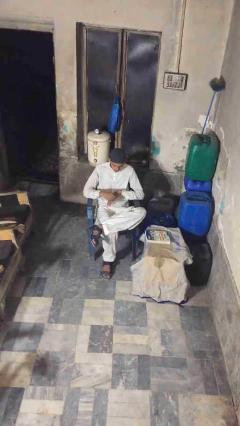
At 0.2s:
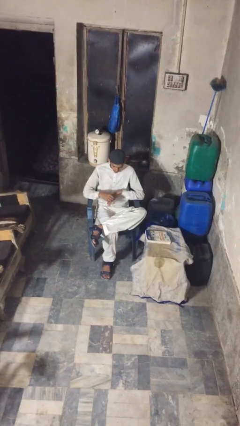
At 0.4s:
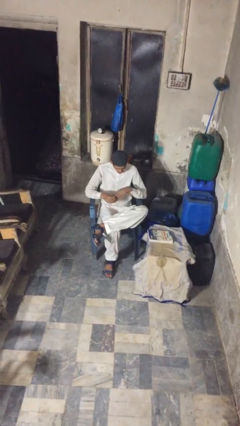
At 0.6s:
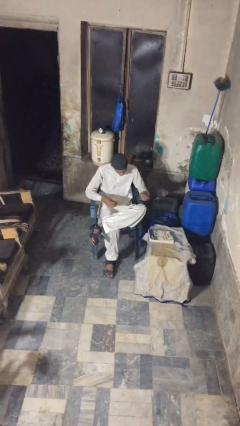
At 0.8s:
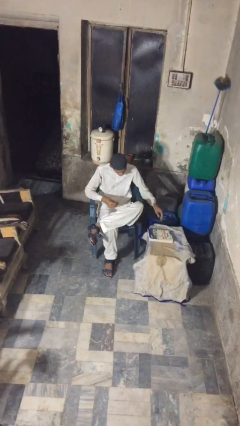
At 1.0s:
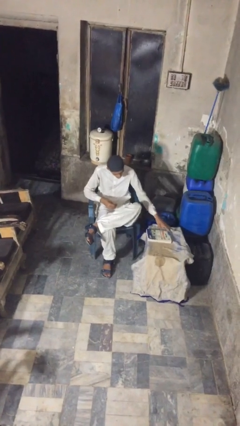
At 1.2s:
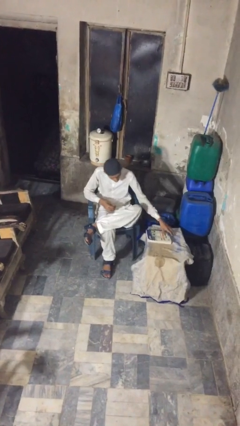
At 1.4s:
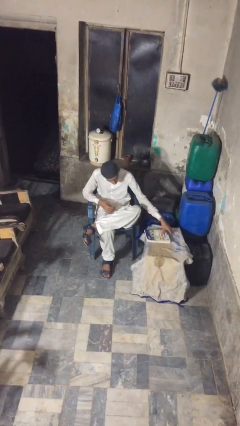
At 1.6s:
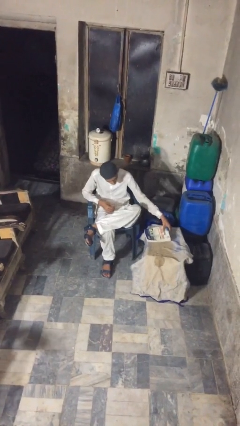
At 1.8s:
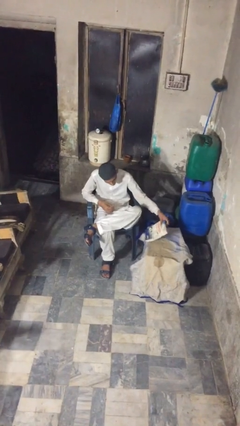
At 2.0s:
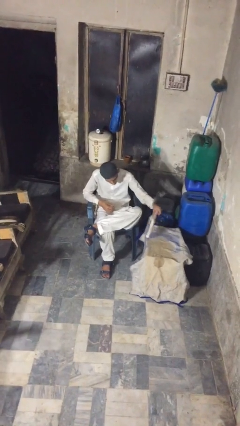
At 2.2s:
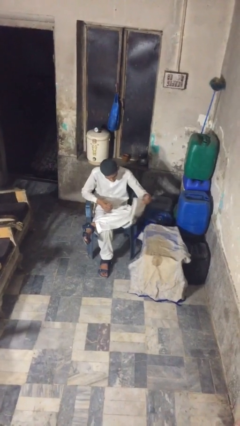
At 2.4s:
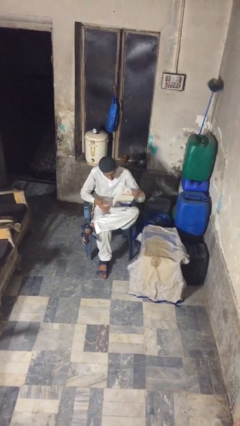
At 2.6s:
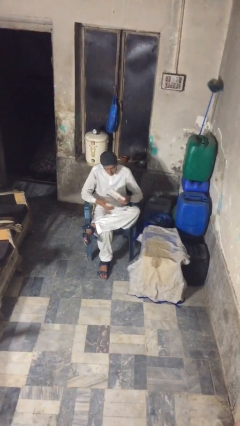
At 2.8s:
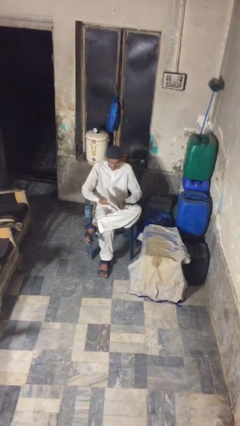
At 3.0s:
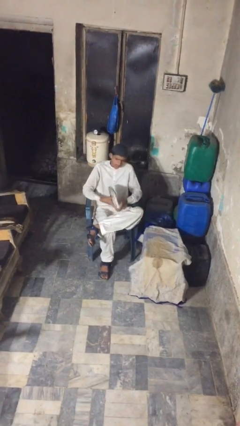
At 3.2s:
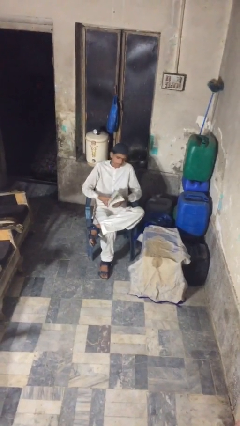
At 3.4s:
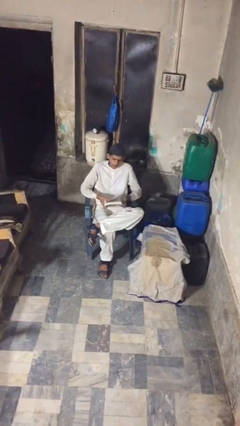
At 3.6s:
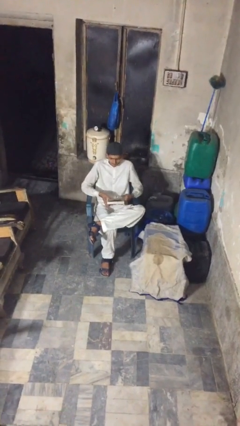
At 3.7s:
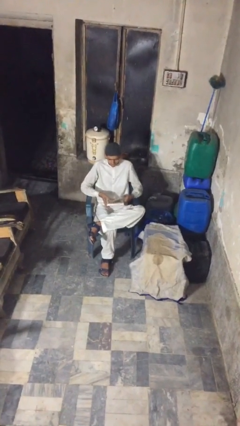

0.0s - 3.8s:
person picks up object from table

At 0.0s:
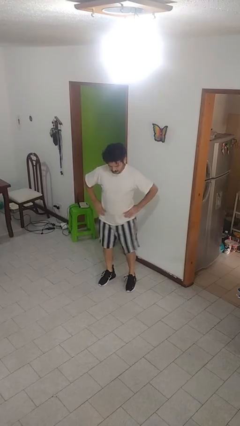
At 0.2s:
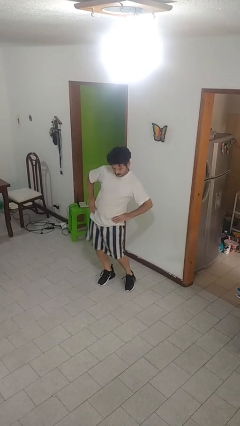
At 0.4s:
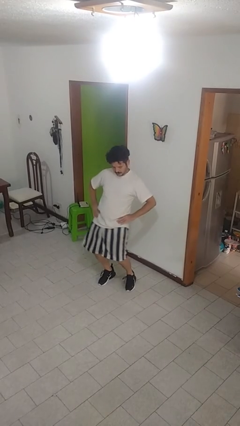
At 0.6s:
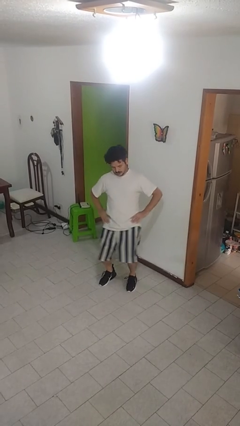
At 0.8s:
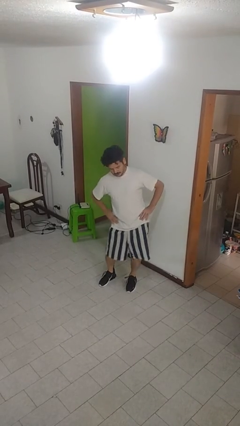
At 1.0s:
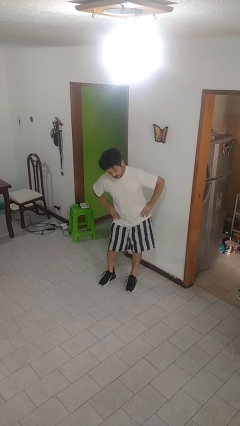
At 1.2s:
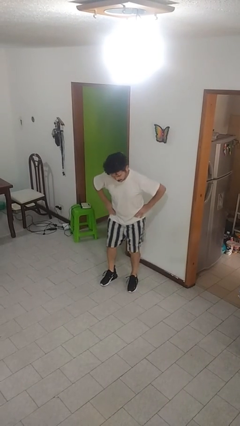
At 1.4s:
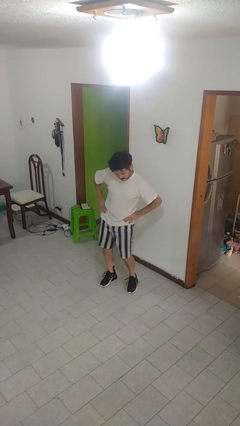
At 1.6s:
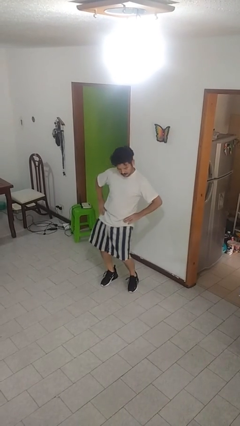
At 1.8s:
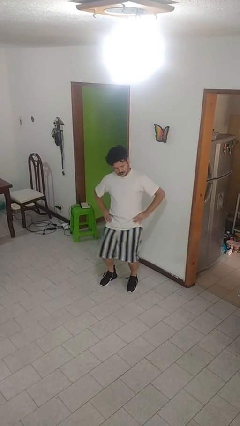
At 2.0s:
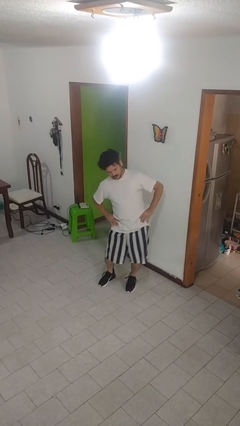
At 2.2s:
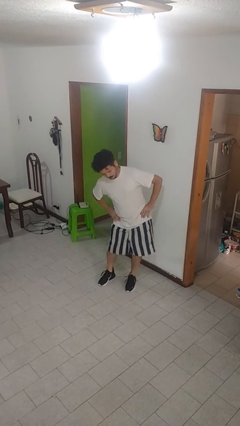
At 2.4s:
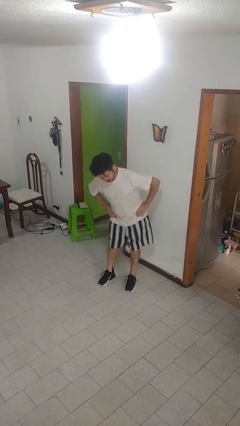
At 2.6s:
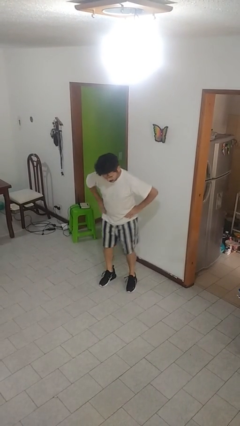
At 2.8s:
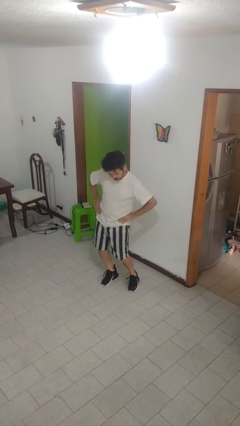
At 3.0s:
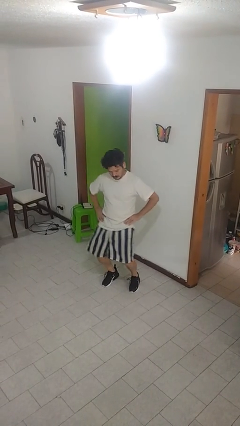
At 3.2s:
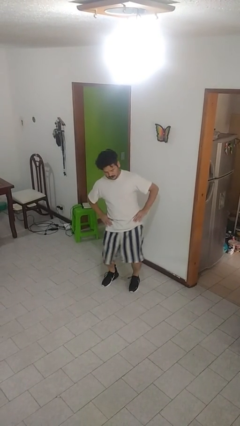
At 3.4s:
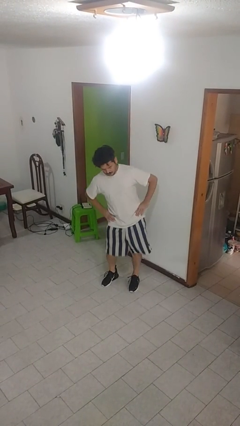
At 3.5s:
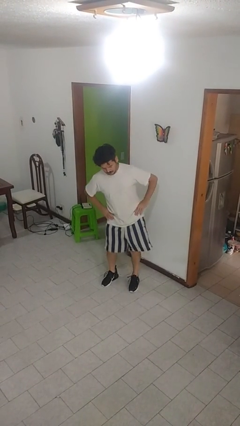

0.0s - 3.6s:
person wiggles hips

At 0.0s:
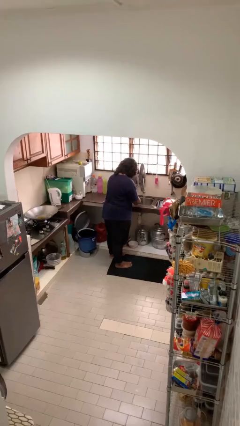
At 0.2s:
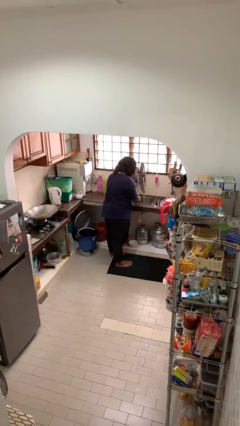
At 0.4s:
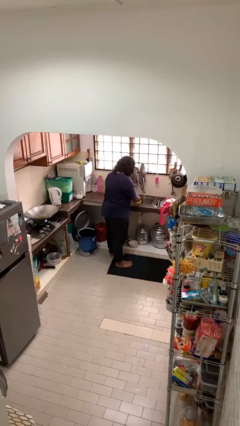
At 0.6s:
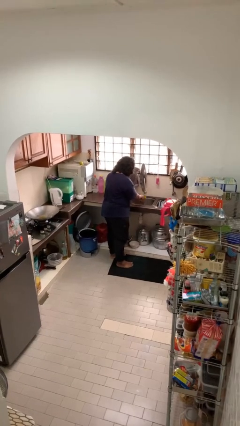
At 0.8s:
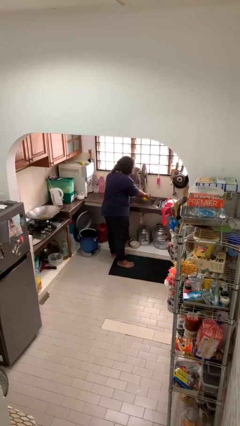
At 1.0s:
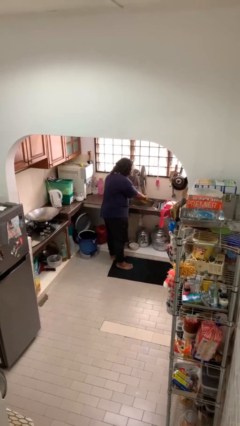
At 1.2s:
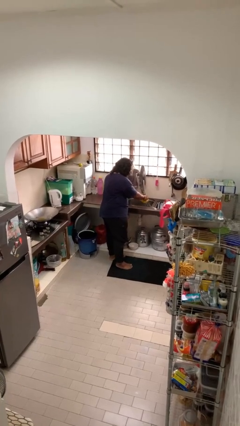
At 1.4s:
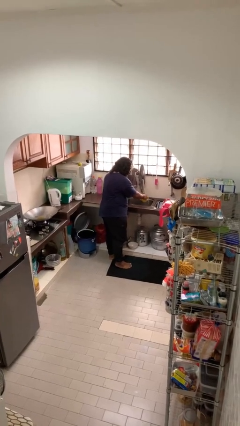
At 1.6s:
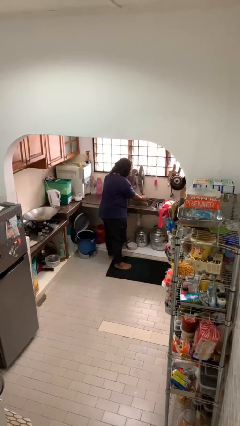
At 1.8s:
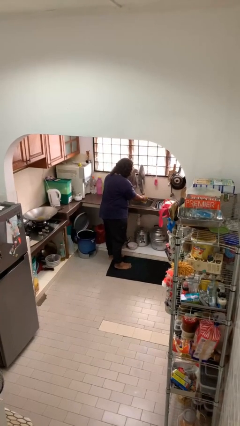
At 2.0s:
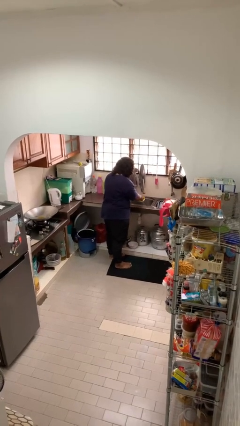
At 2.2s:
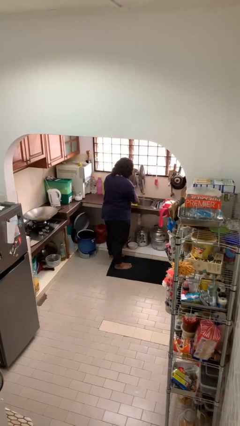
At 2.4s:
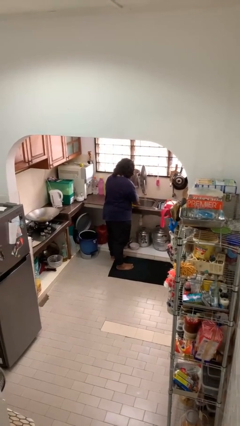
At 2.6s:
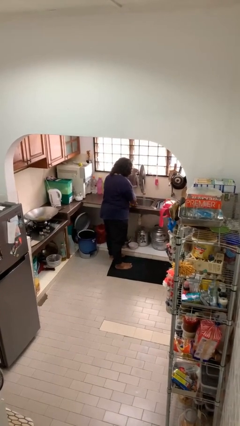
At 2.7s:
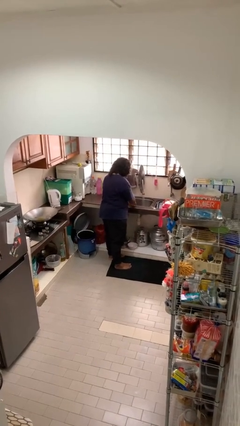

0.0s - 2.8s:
person washes dish

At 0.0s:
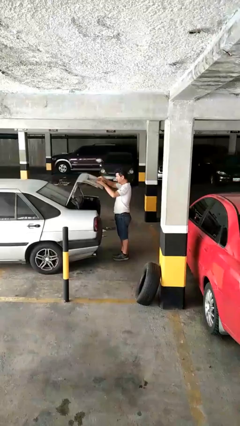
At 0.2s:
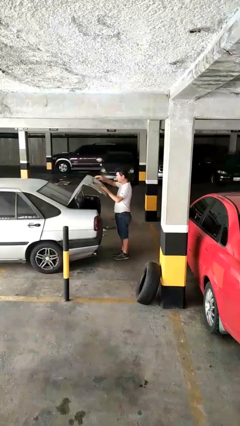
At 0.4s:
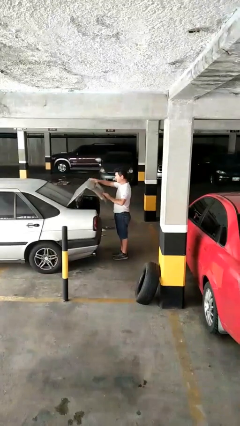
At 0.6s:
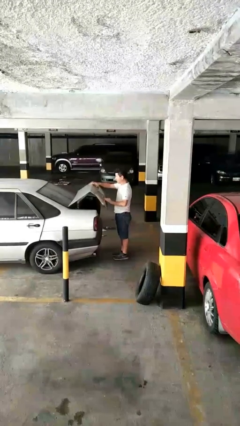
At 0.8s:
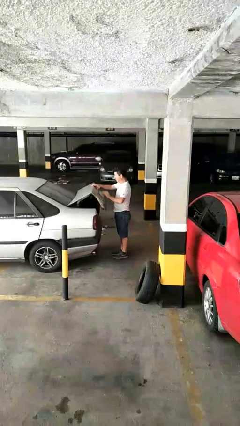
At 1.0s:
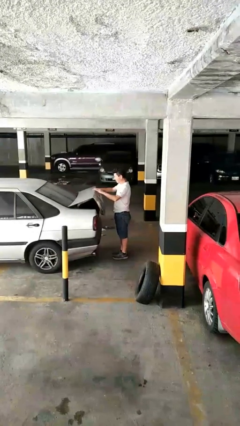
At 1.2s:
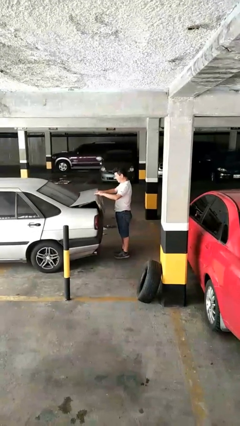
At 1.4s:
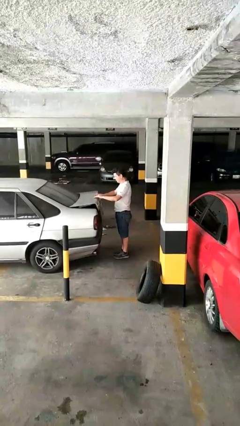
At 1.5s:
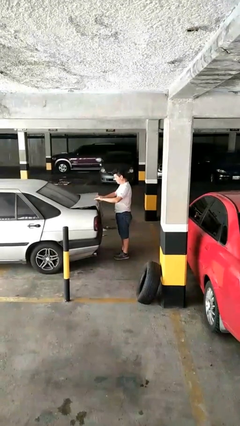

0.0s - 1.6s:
person closes car trunk

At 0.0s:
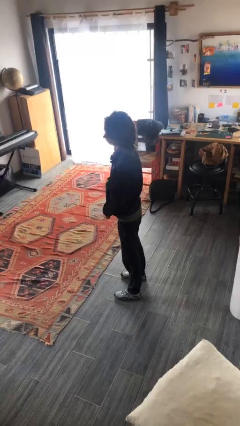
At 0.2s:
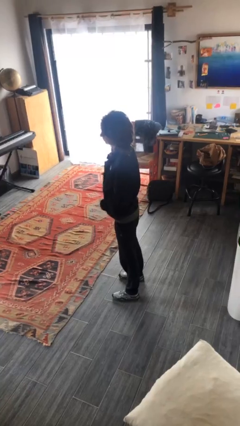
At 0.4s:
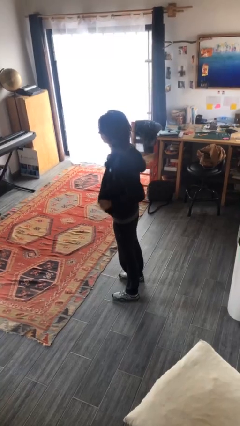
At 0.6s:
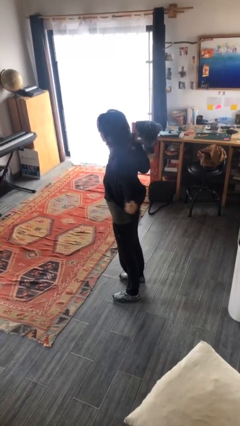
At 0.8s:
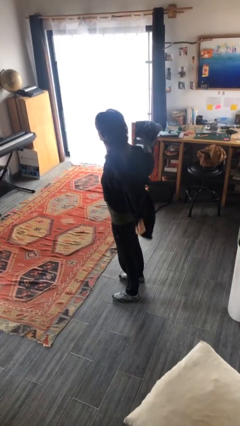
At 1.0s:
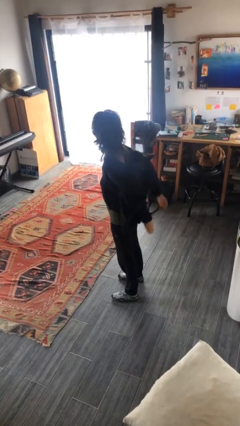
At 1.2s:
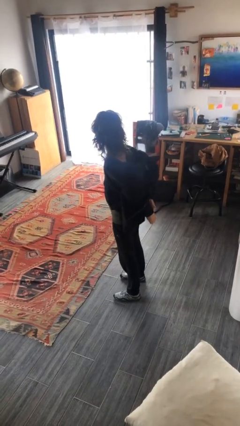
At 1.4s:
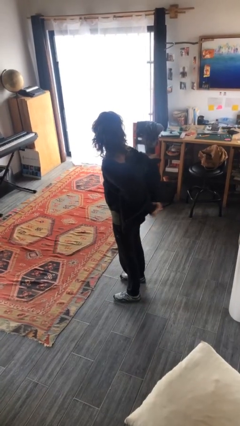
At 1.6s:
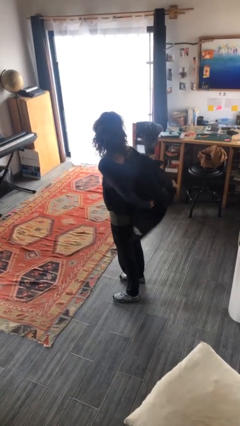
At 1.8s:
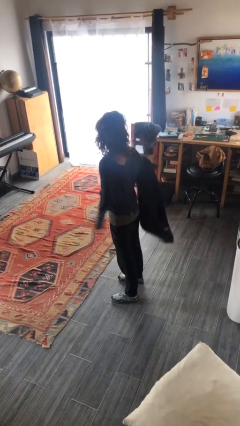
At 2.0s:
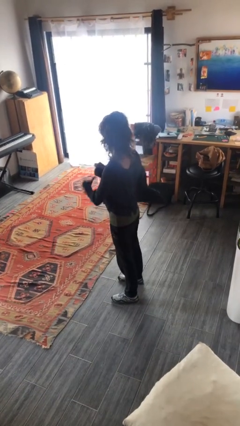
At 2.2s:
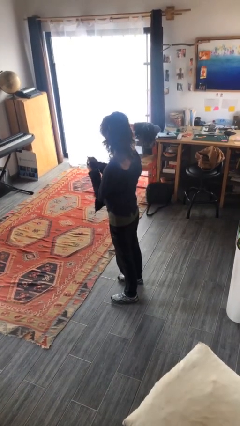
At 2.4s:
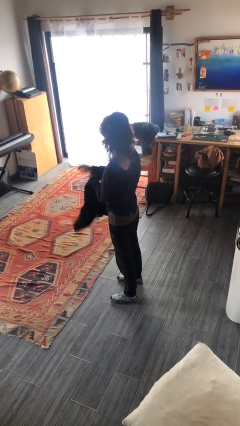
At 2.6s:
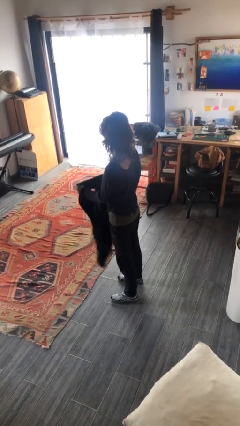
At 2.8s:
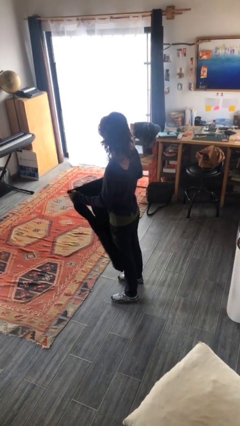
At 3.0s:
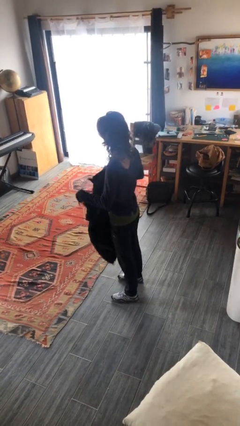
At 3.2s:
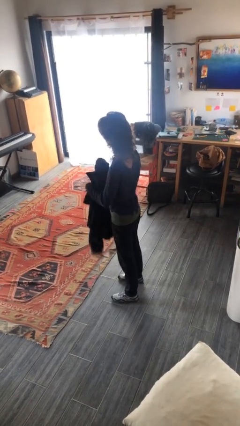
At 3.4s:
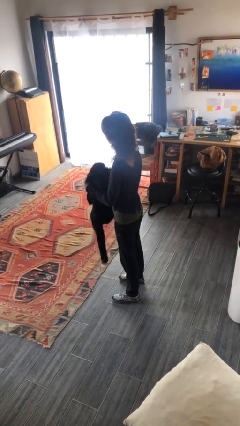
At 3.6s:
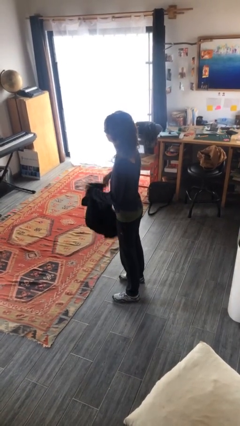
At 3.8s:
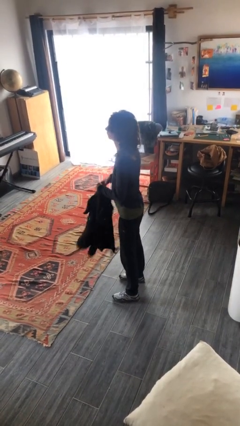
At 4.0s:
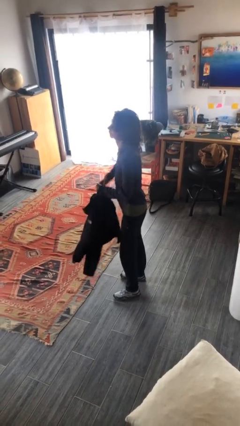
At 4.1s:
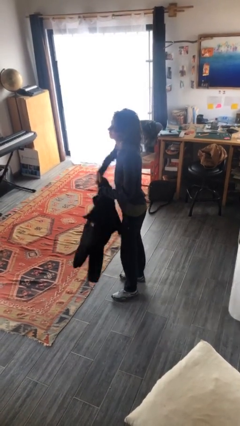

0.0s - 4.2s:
person takes off jacket

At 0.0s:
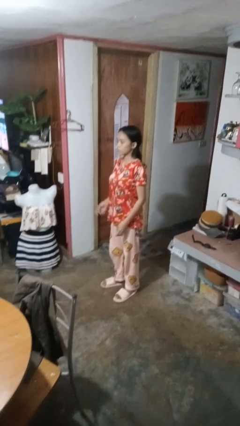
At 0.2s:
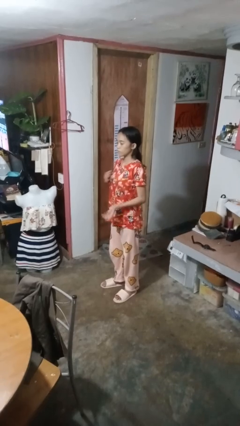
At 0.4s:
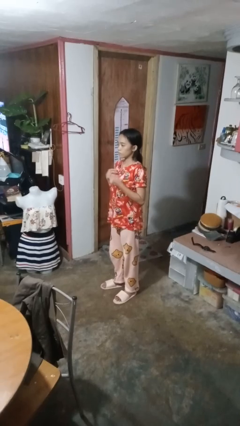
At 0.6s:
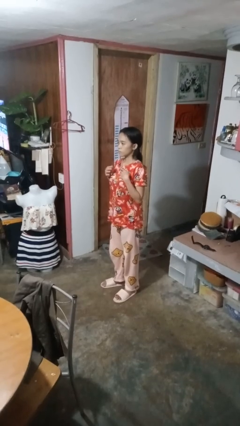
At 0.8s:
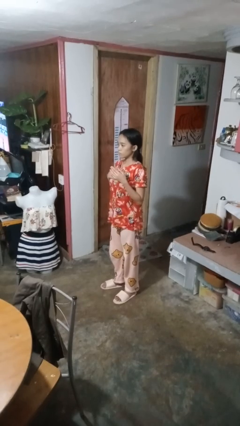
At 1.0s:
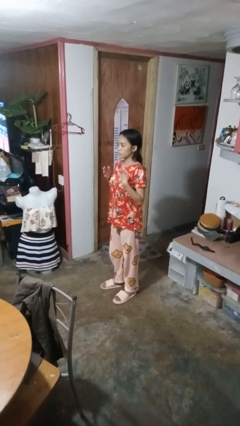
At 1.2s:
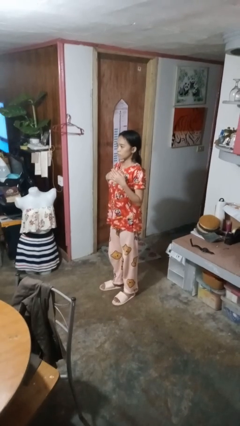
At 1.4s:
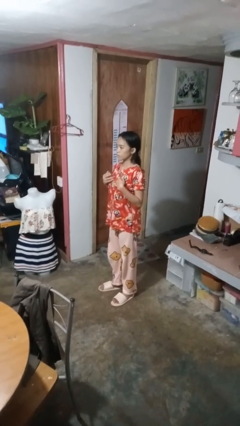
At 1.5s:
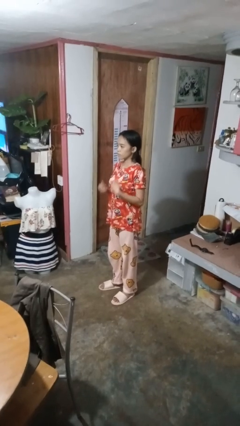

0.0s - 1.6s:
person drums on chest
